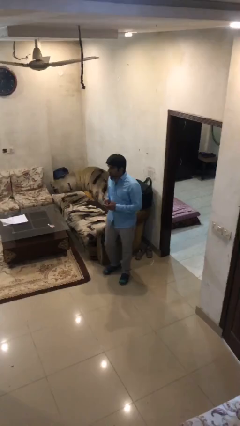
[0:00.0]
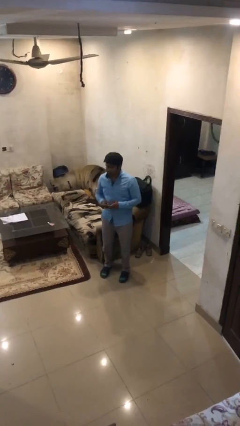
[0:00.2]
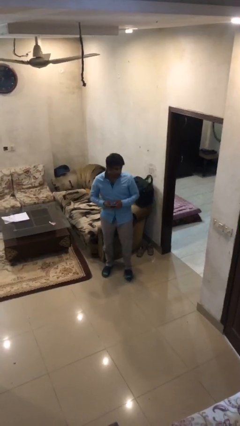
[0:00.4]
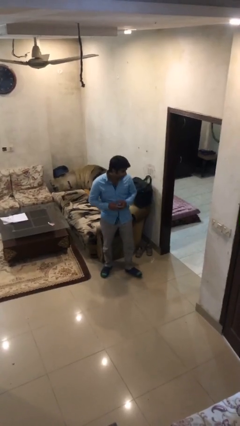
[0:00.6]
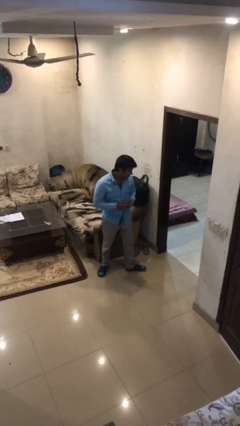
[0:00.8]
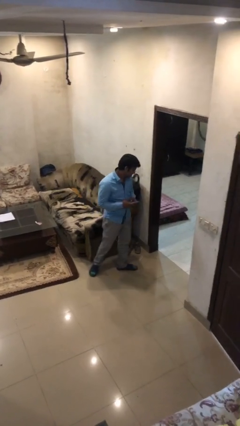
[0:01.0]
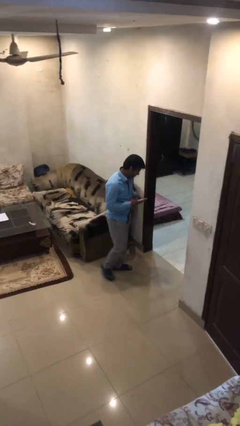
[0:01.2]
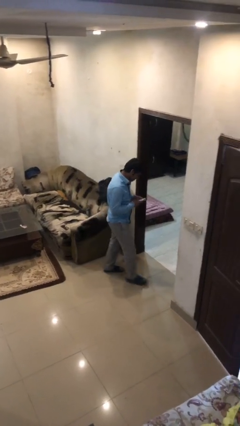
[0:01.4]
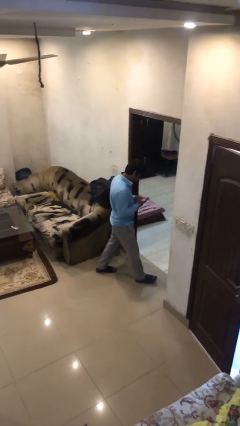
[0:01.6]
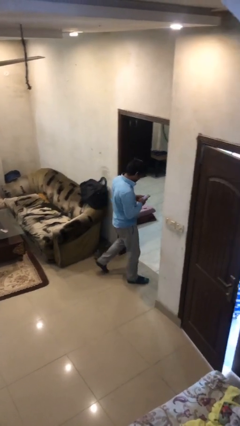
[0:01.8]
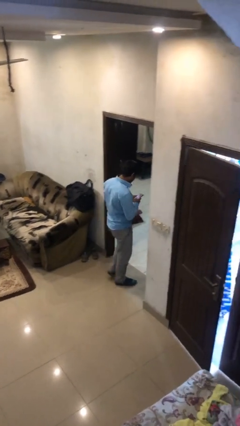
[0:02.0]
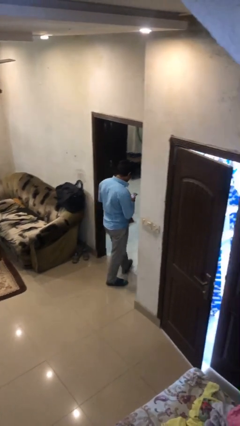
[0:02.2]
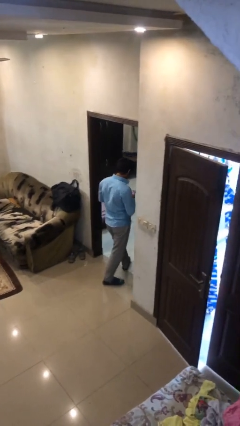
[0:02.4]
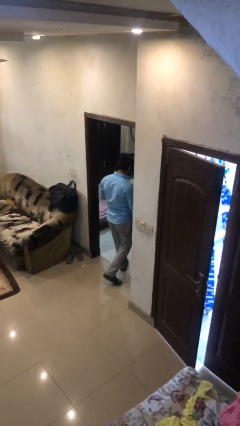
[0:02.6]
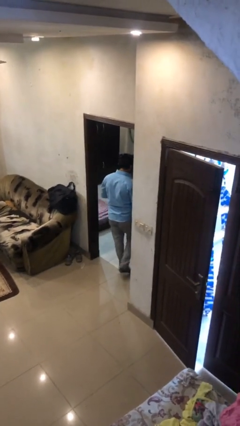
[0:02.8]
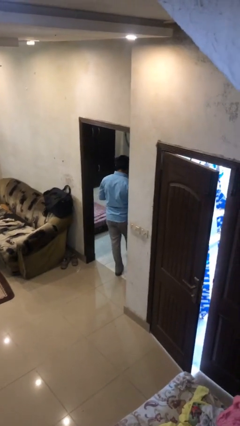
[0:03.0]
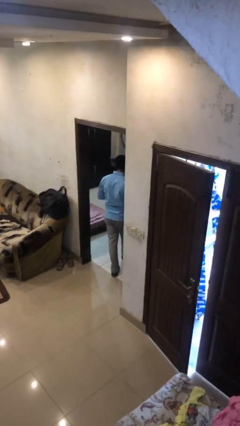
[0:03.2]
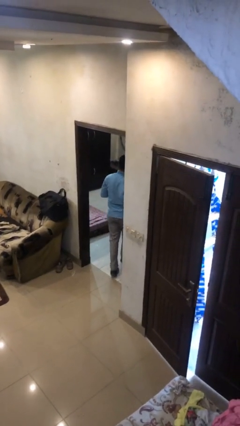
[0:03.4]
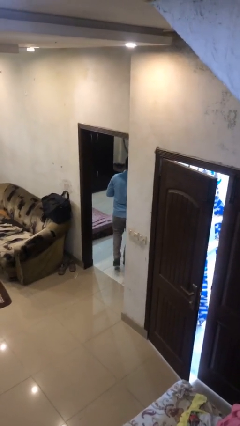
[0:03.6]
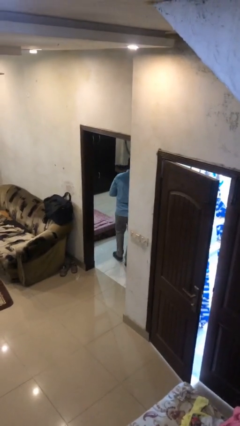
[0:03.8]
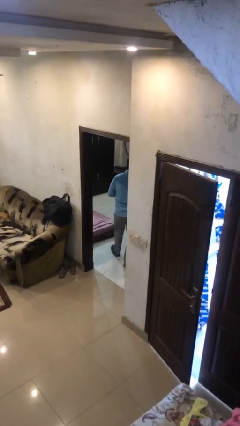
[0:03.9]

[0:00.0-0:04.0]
person exits scene through structure

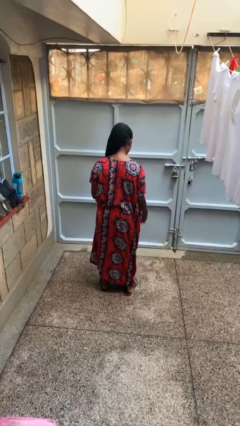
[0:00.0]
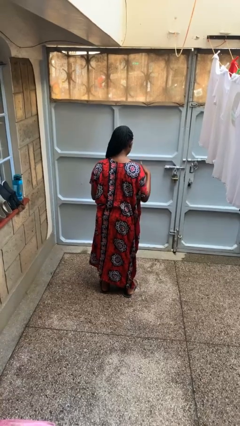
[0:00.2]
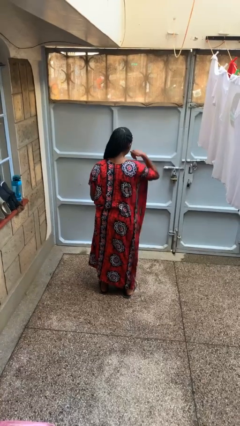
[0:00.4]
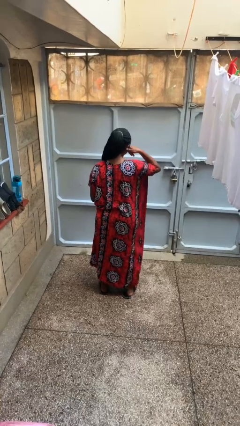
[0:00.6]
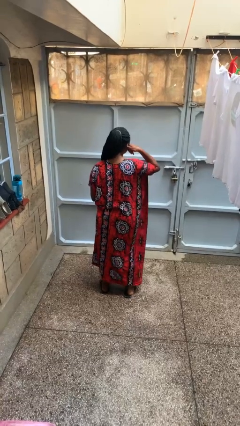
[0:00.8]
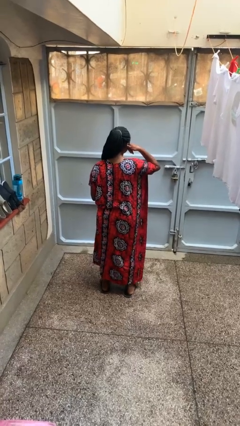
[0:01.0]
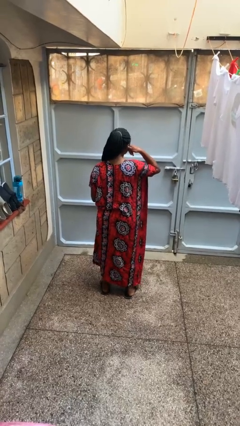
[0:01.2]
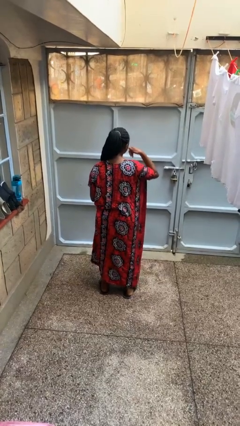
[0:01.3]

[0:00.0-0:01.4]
person gestures call me

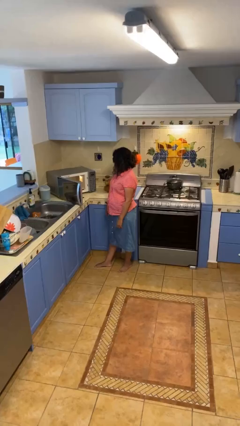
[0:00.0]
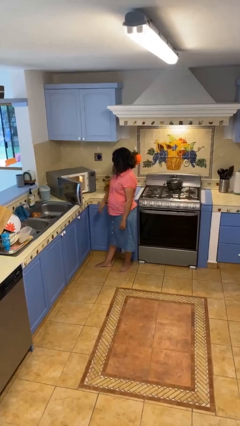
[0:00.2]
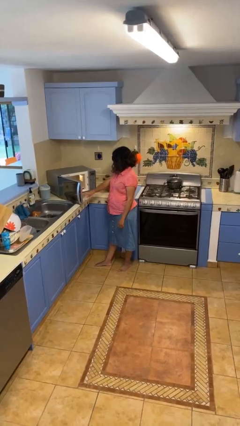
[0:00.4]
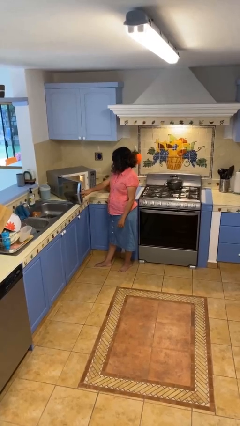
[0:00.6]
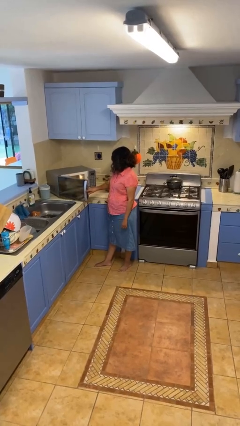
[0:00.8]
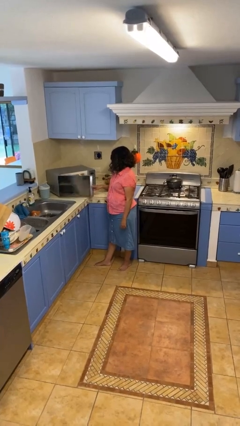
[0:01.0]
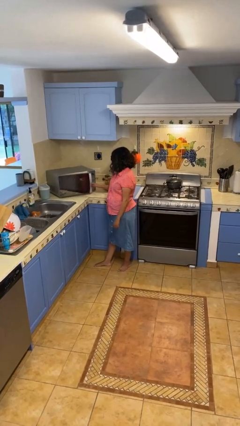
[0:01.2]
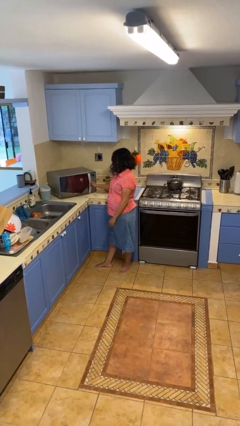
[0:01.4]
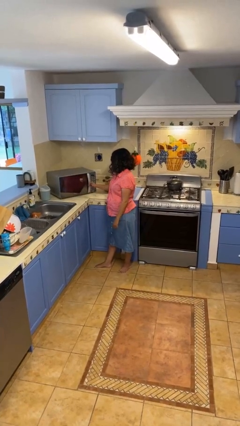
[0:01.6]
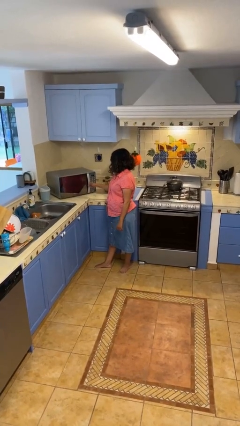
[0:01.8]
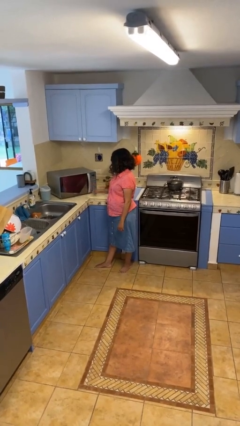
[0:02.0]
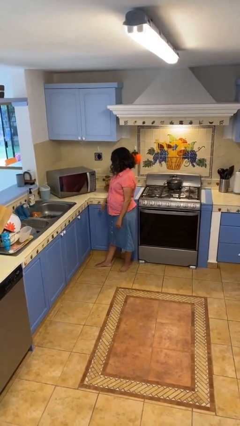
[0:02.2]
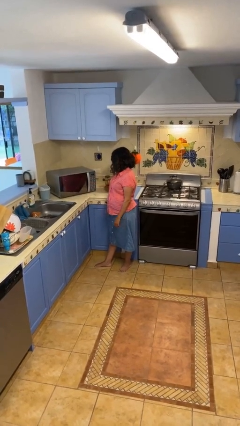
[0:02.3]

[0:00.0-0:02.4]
person closes microwave

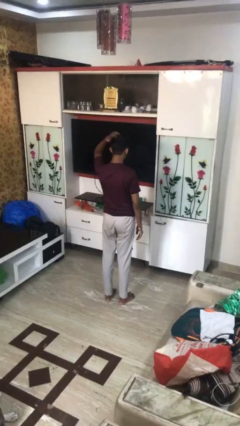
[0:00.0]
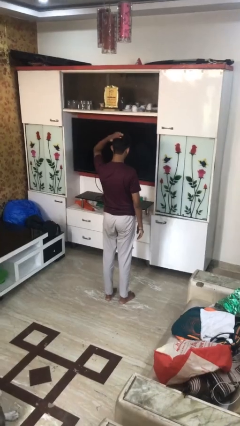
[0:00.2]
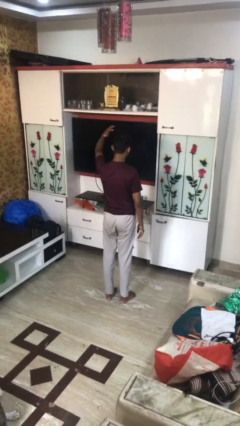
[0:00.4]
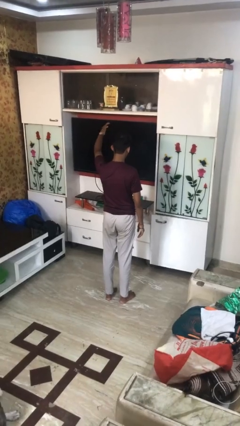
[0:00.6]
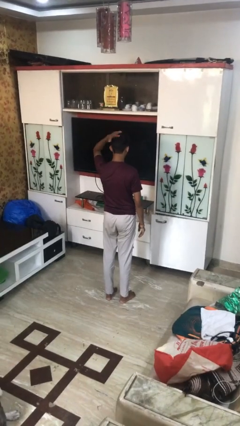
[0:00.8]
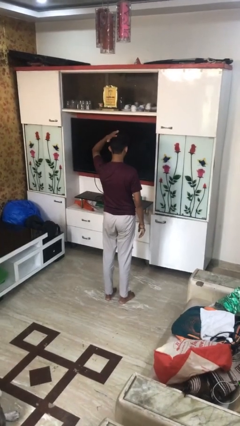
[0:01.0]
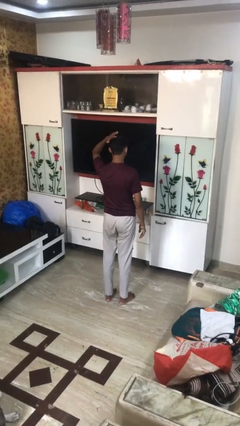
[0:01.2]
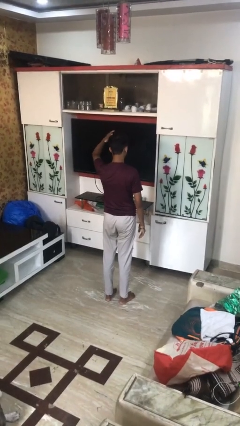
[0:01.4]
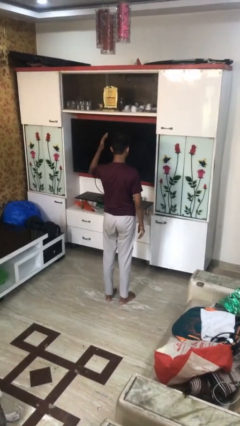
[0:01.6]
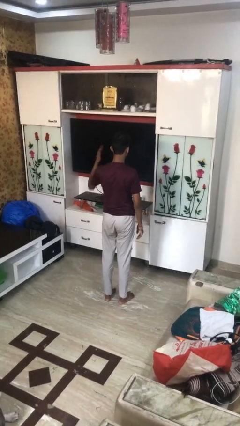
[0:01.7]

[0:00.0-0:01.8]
person pats head

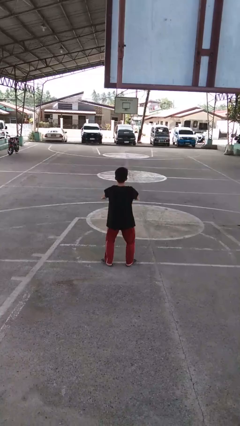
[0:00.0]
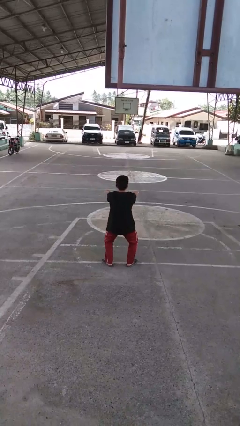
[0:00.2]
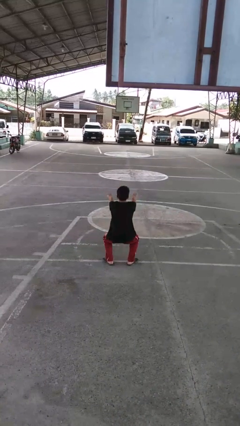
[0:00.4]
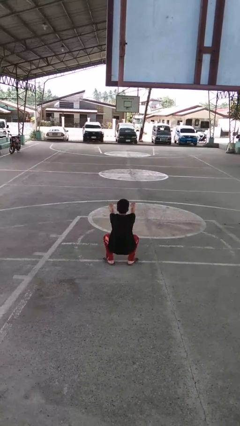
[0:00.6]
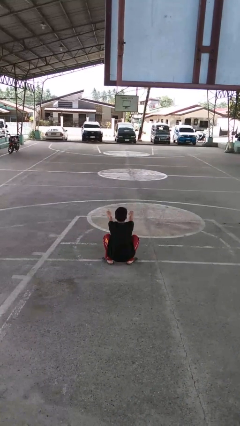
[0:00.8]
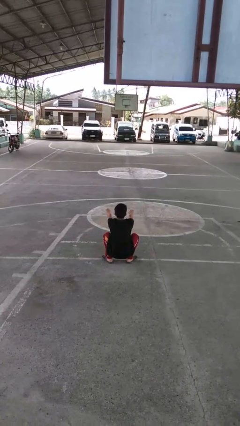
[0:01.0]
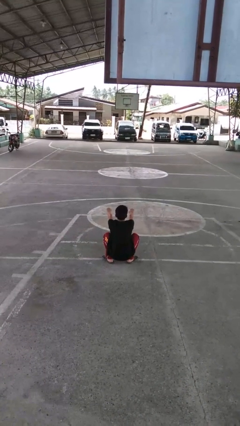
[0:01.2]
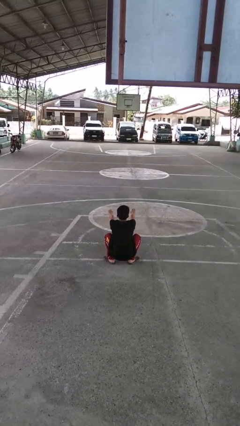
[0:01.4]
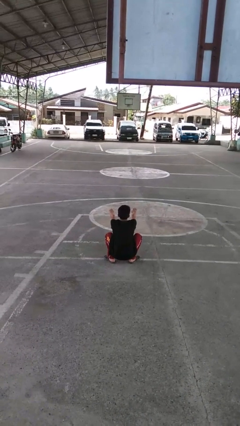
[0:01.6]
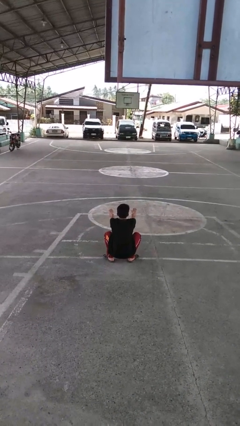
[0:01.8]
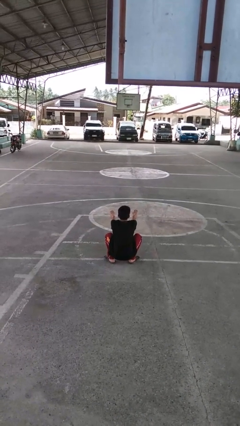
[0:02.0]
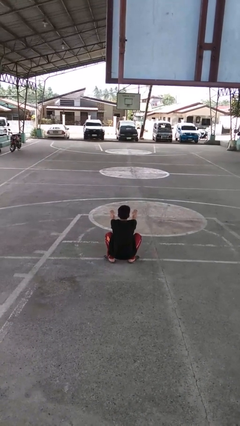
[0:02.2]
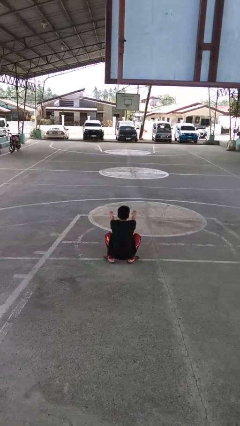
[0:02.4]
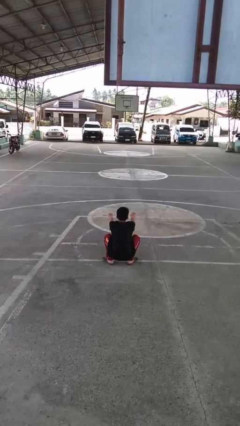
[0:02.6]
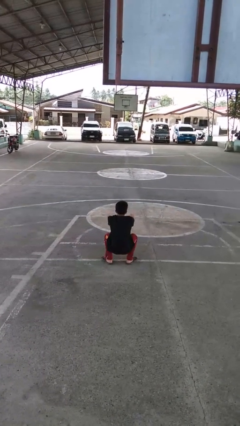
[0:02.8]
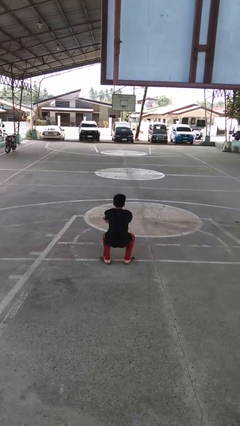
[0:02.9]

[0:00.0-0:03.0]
person squats

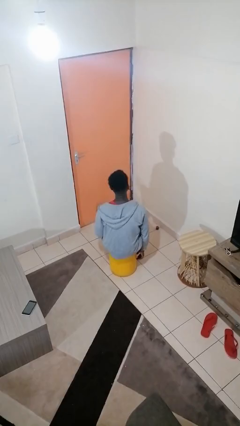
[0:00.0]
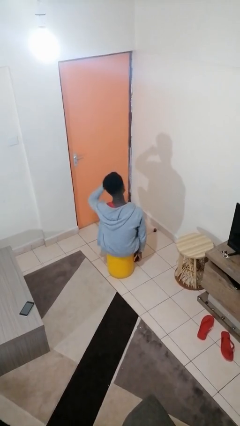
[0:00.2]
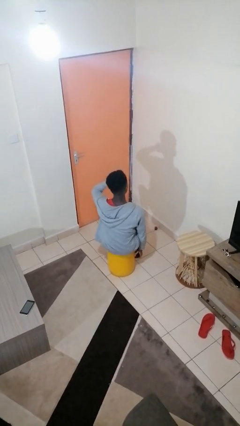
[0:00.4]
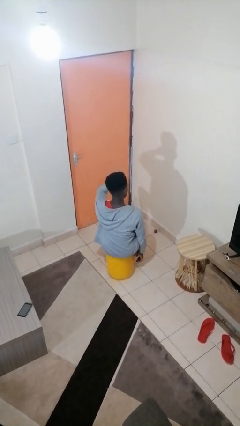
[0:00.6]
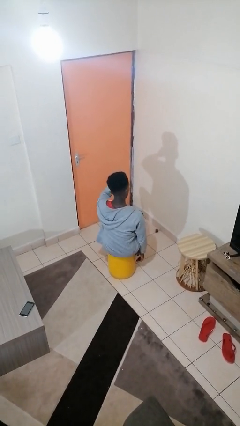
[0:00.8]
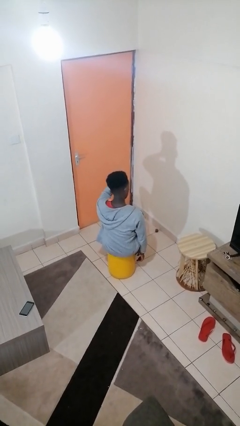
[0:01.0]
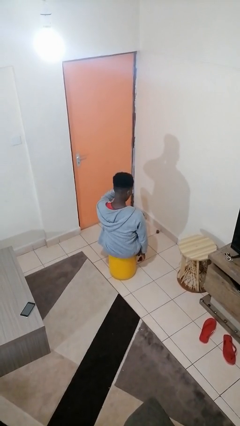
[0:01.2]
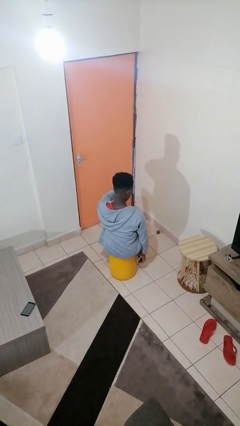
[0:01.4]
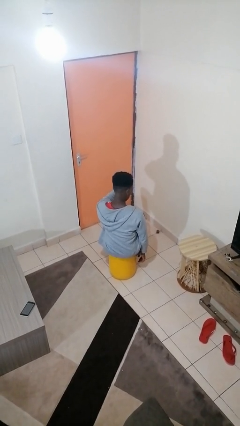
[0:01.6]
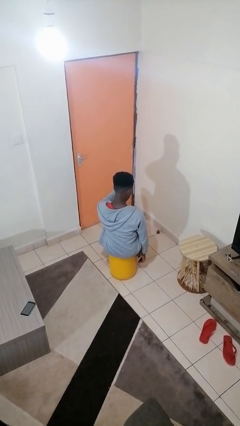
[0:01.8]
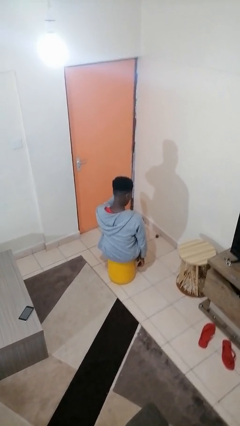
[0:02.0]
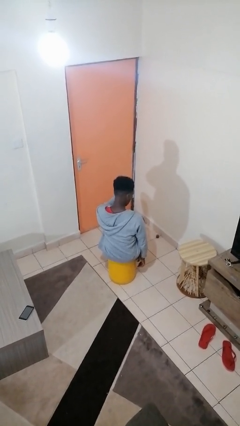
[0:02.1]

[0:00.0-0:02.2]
person rubs eyes

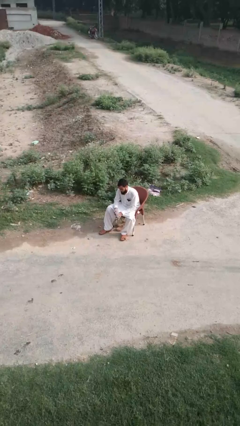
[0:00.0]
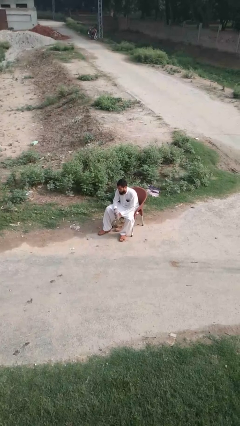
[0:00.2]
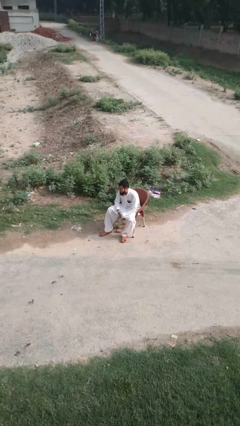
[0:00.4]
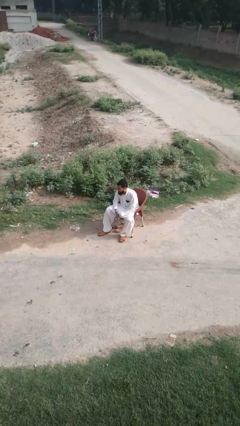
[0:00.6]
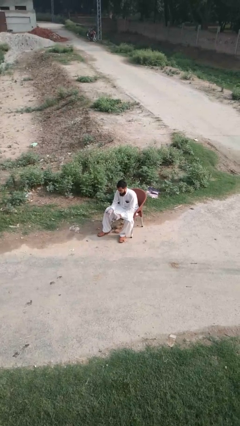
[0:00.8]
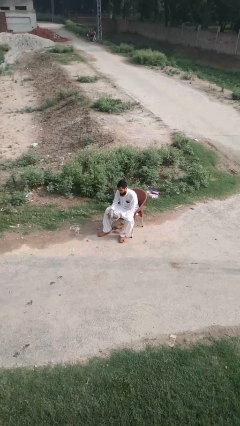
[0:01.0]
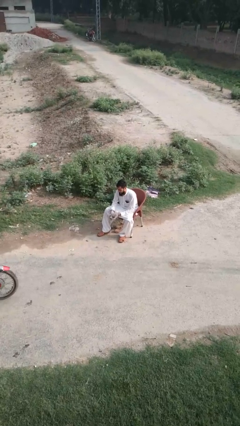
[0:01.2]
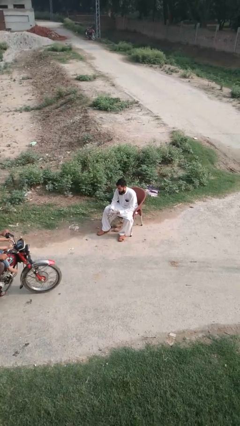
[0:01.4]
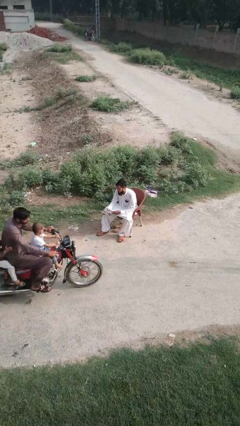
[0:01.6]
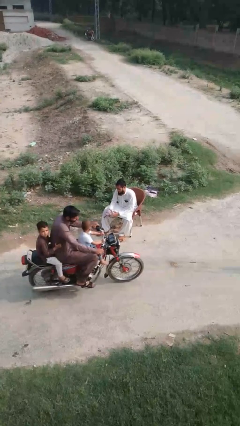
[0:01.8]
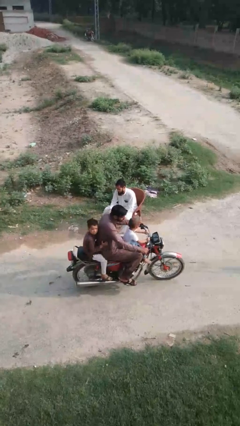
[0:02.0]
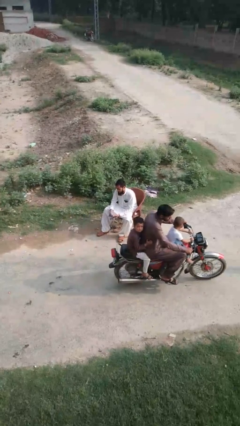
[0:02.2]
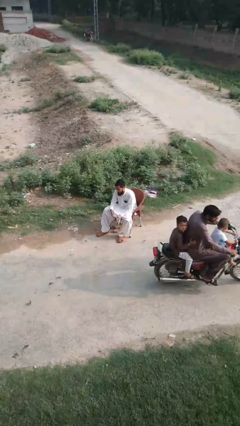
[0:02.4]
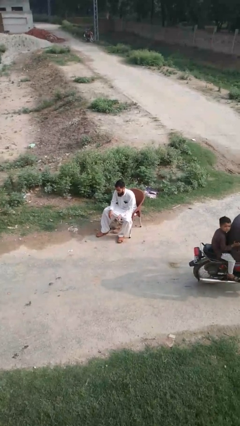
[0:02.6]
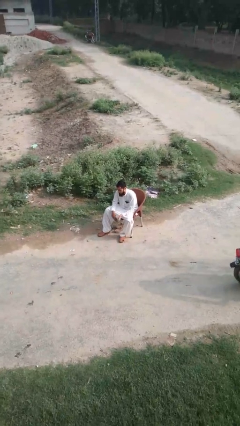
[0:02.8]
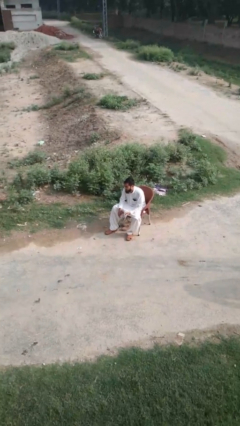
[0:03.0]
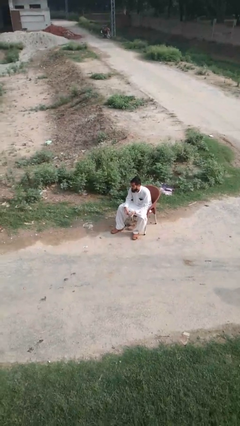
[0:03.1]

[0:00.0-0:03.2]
person takes off gloves
